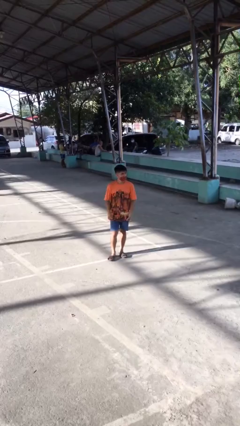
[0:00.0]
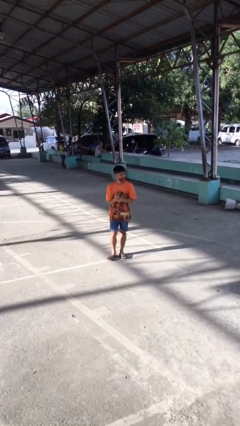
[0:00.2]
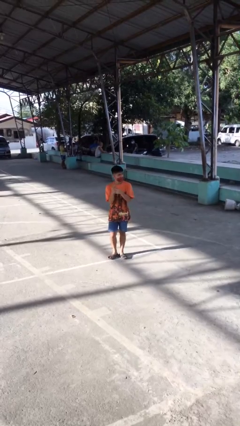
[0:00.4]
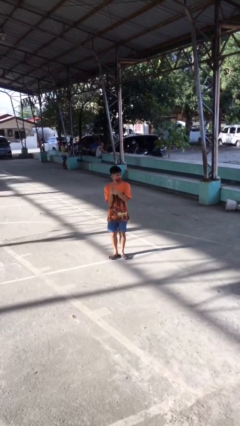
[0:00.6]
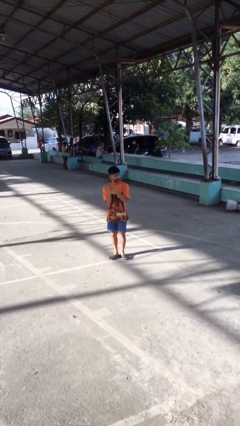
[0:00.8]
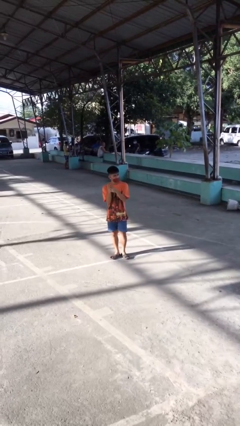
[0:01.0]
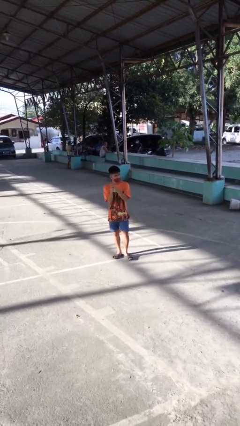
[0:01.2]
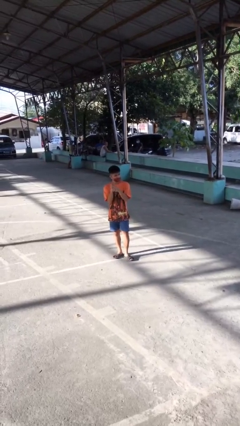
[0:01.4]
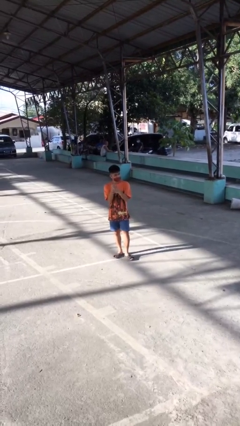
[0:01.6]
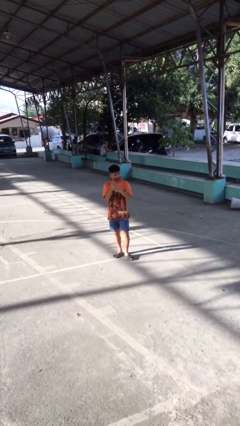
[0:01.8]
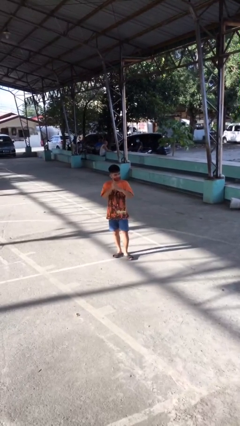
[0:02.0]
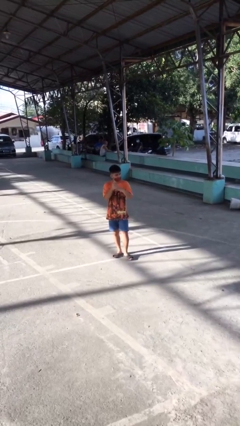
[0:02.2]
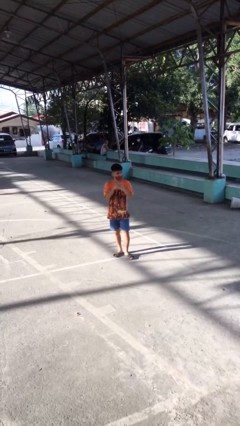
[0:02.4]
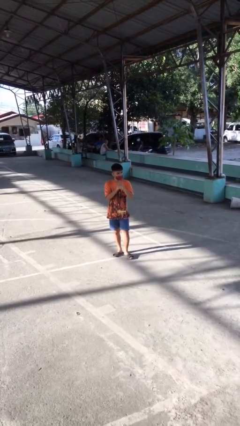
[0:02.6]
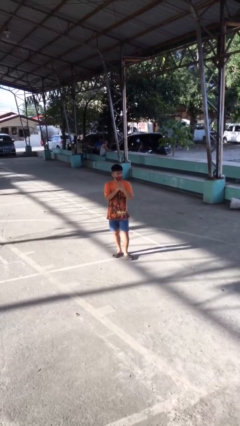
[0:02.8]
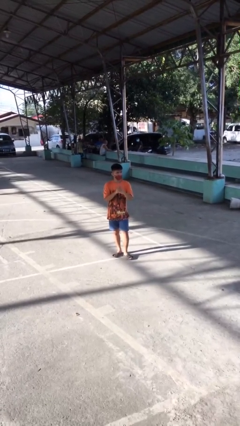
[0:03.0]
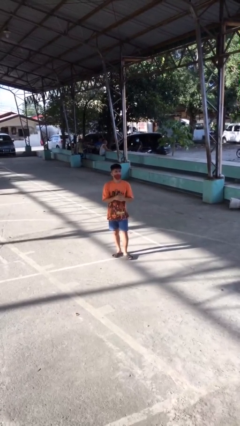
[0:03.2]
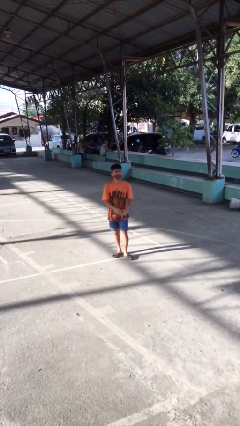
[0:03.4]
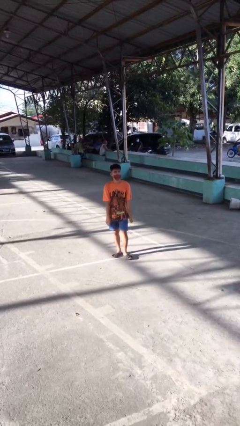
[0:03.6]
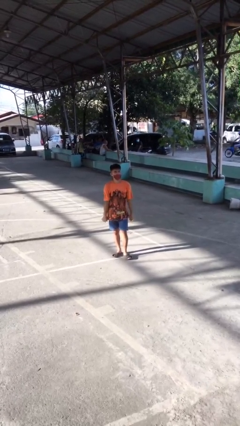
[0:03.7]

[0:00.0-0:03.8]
person cracks knuckles

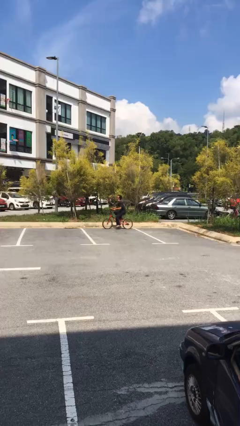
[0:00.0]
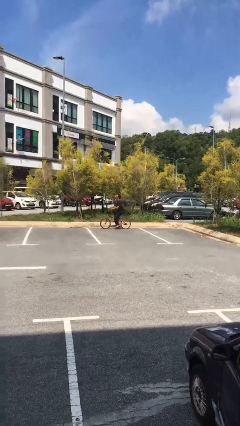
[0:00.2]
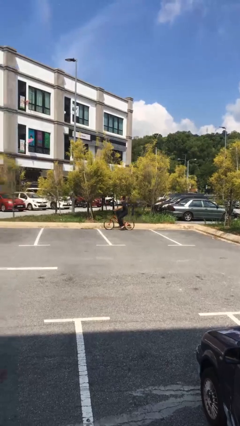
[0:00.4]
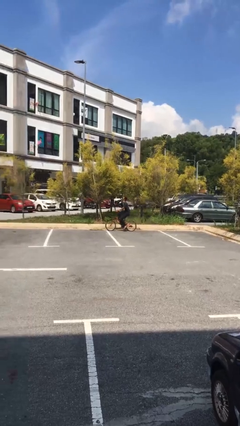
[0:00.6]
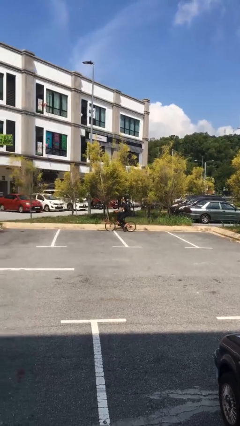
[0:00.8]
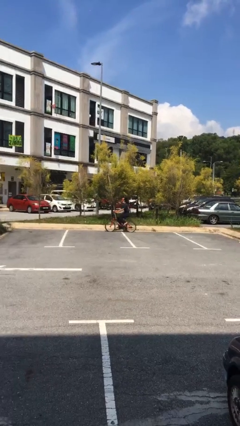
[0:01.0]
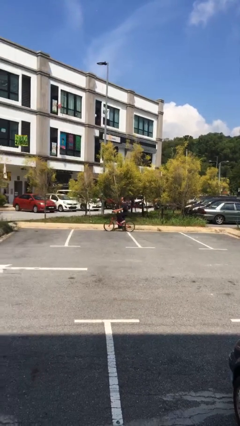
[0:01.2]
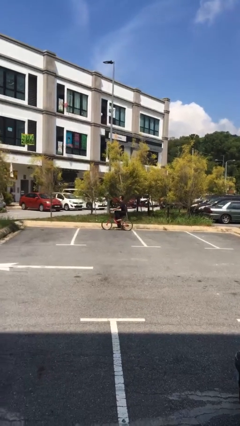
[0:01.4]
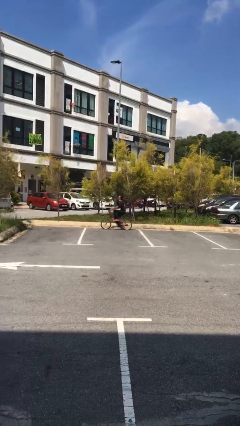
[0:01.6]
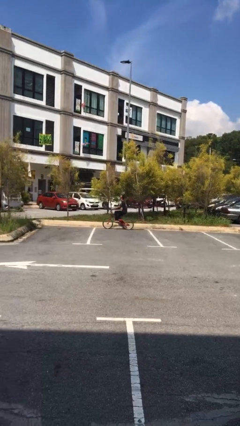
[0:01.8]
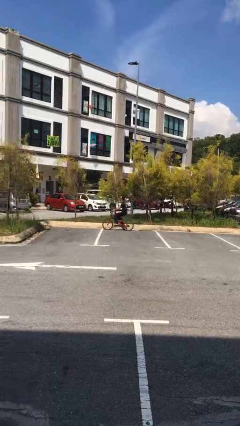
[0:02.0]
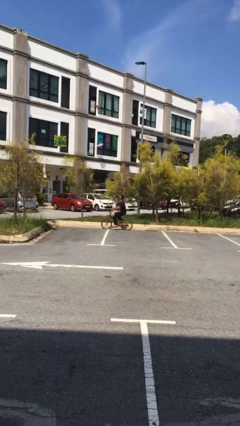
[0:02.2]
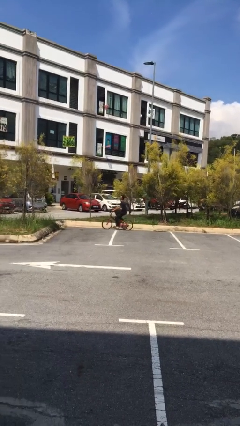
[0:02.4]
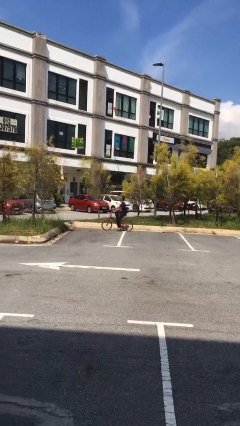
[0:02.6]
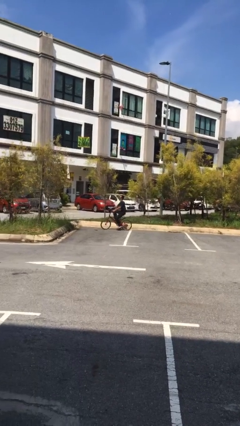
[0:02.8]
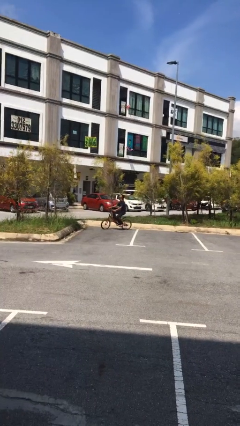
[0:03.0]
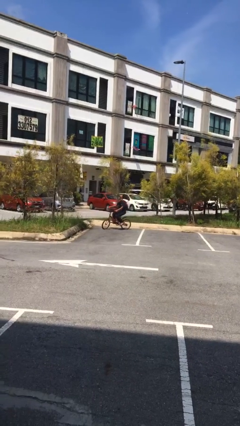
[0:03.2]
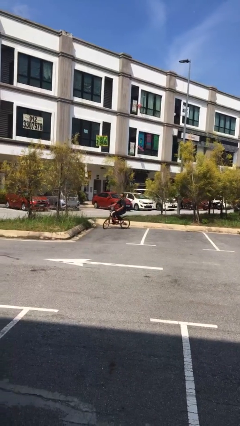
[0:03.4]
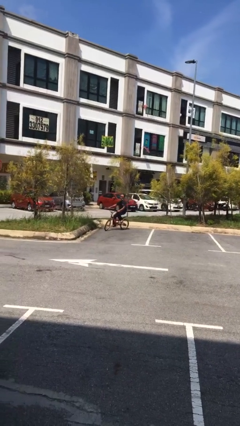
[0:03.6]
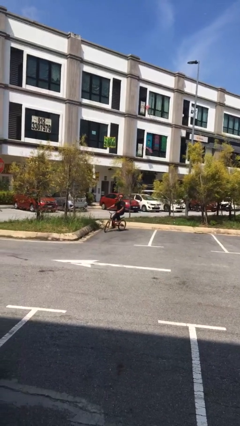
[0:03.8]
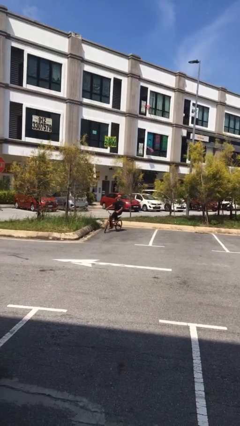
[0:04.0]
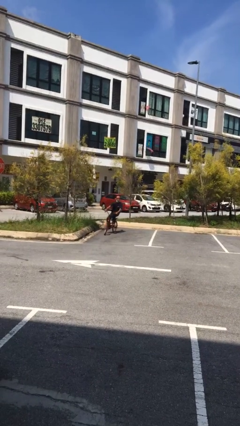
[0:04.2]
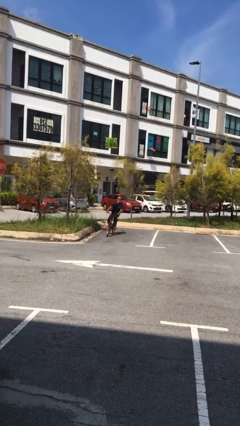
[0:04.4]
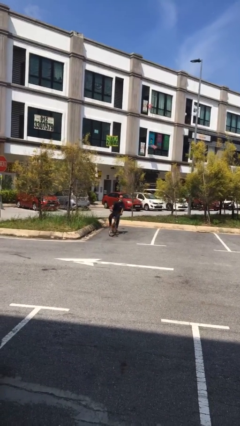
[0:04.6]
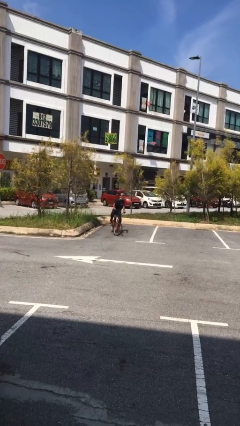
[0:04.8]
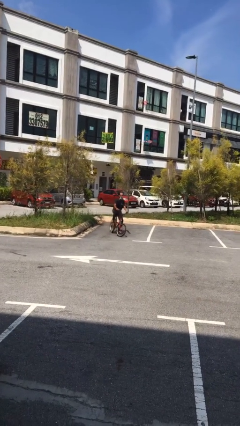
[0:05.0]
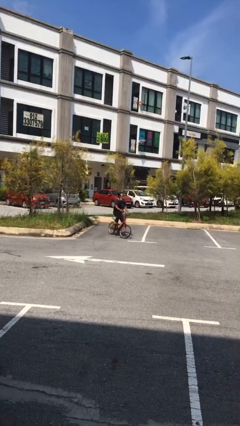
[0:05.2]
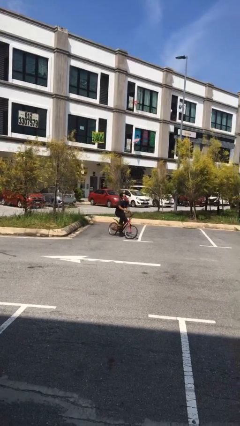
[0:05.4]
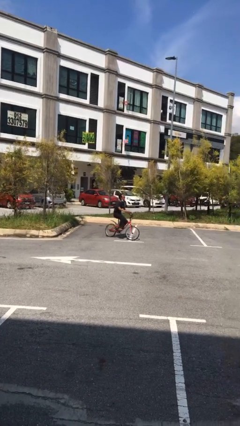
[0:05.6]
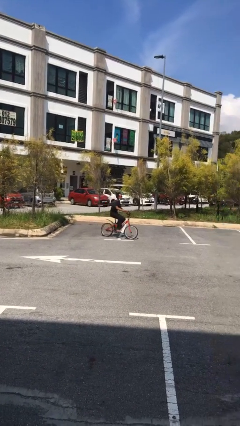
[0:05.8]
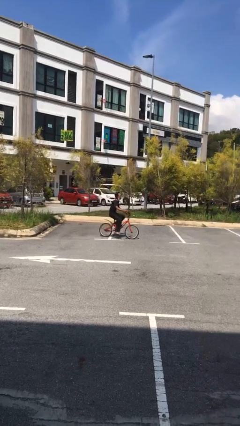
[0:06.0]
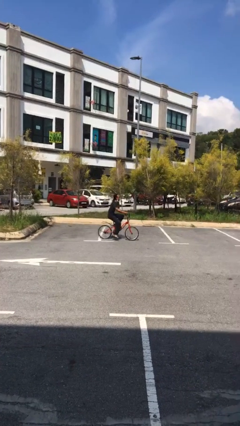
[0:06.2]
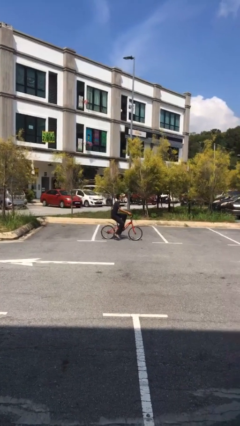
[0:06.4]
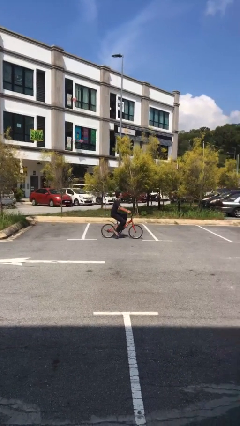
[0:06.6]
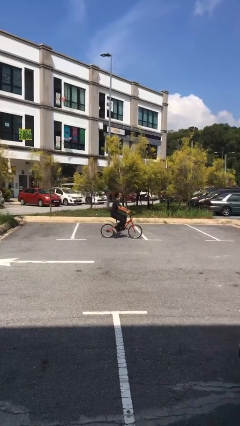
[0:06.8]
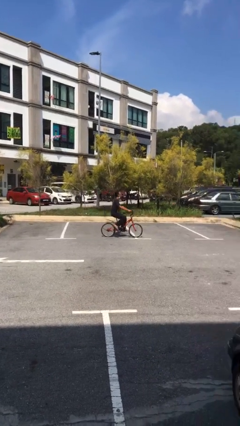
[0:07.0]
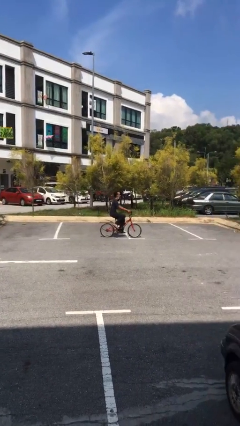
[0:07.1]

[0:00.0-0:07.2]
person rides bicycle

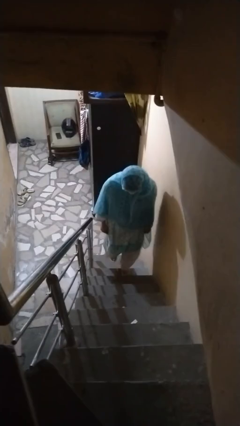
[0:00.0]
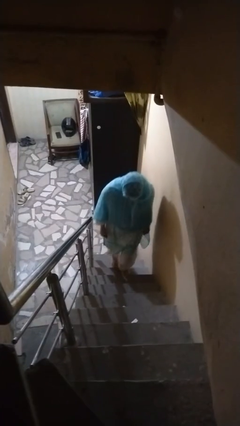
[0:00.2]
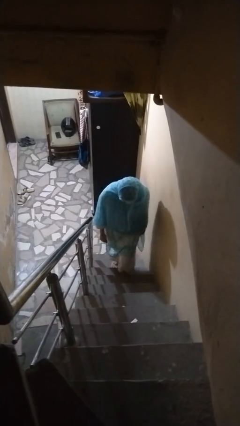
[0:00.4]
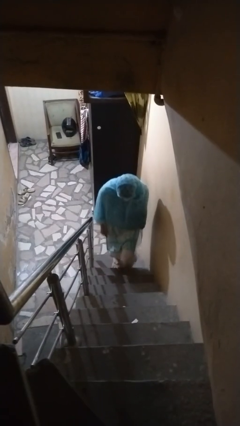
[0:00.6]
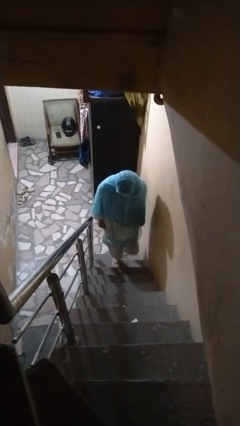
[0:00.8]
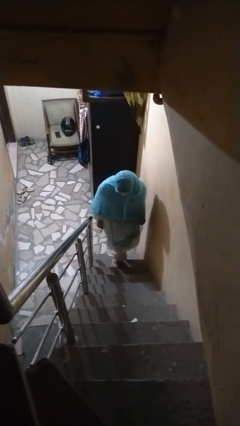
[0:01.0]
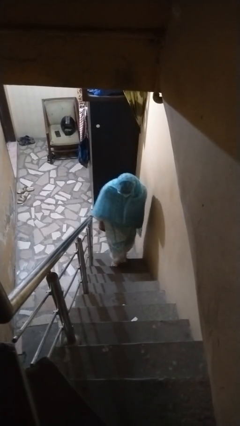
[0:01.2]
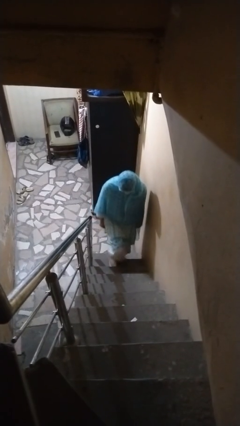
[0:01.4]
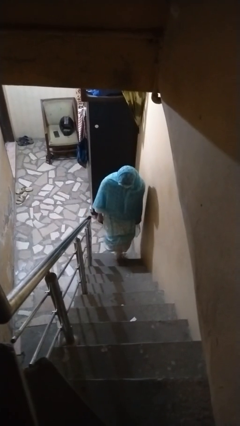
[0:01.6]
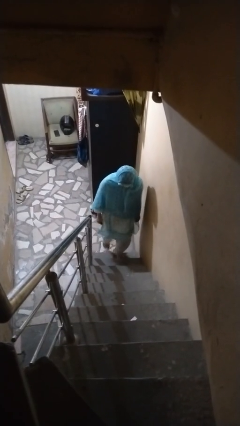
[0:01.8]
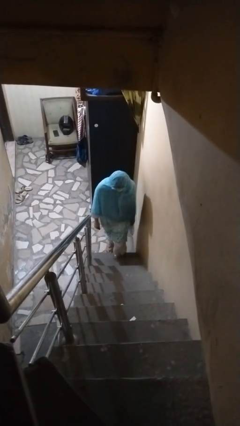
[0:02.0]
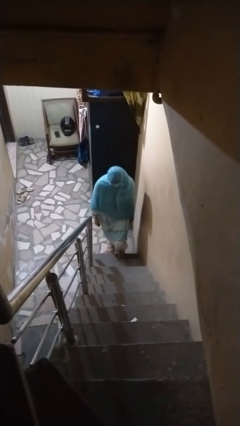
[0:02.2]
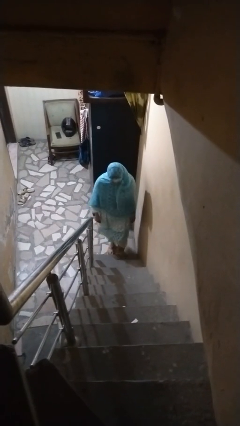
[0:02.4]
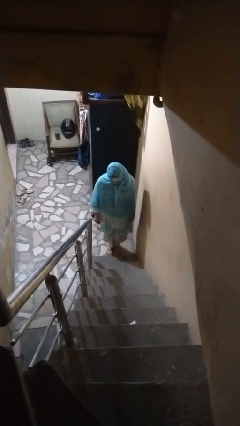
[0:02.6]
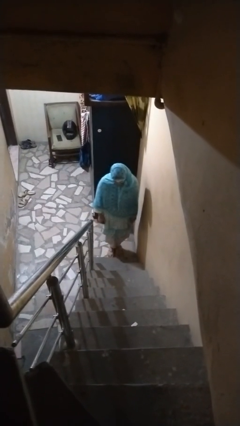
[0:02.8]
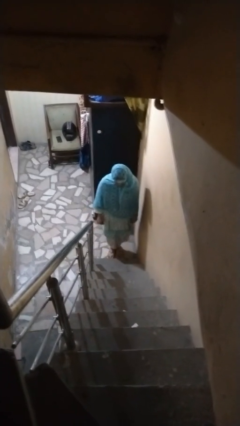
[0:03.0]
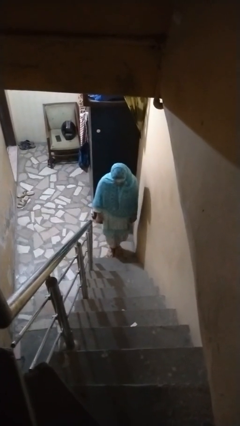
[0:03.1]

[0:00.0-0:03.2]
person climbs down stairs

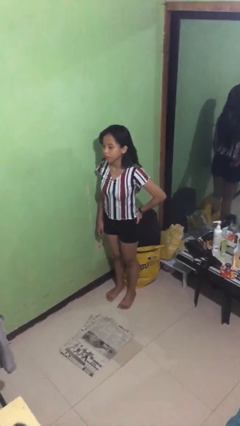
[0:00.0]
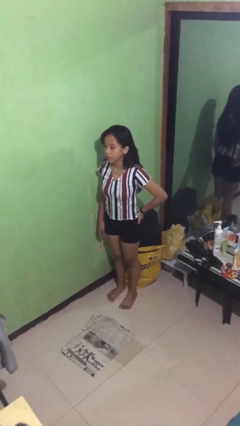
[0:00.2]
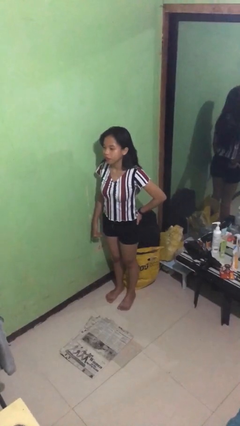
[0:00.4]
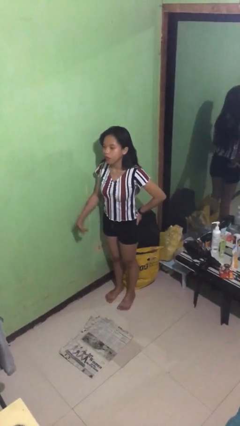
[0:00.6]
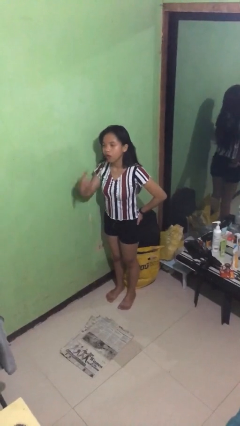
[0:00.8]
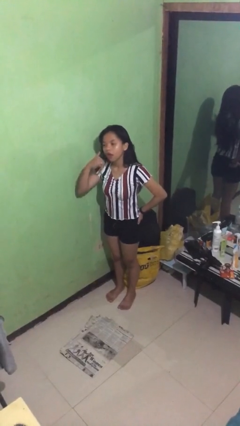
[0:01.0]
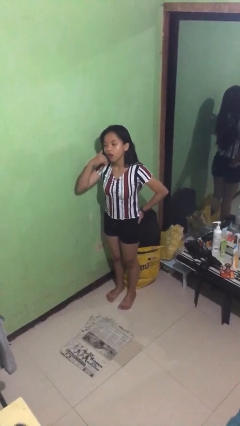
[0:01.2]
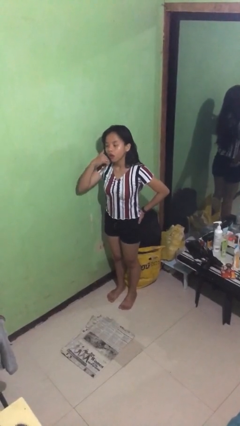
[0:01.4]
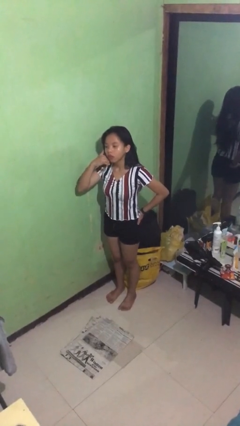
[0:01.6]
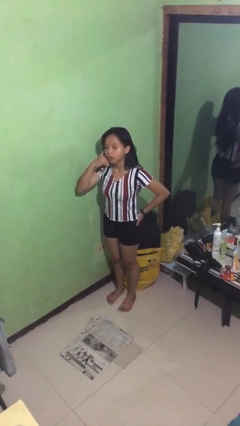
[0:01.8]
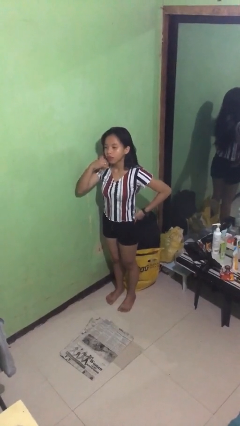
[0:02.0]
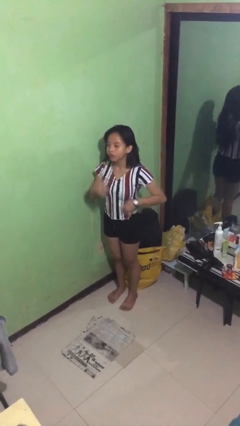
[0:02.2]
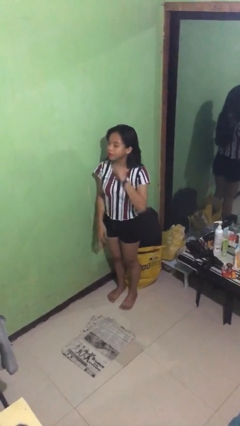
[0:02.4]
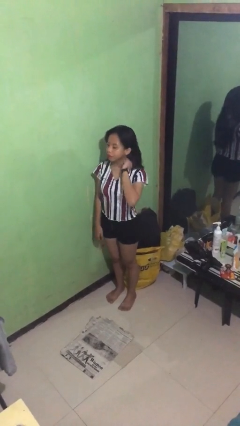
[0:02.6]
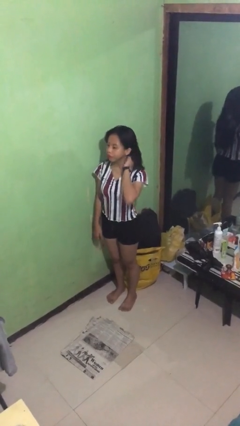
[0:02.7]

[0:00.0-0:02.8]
person gestures call me

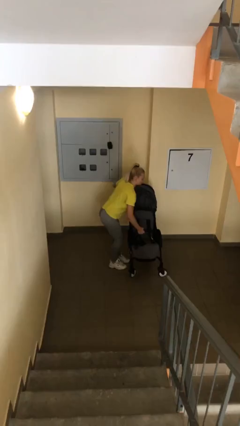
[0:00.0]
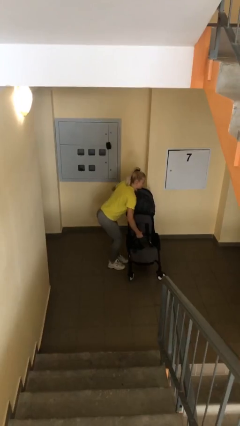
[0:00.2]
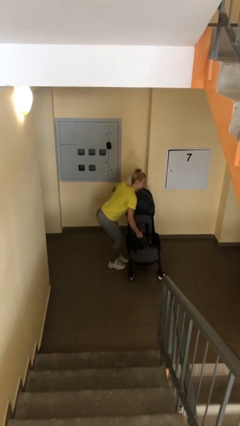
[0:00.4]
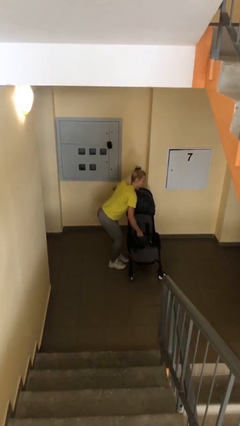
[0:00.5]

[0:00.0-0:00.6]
person puts down object on floor
